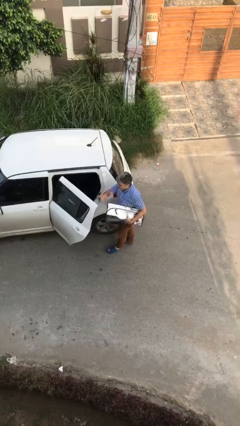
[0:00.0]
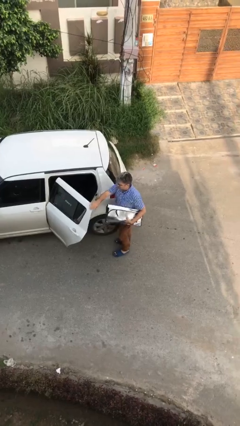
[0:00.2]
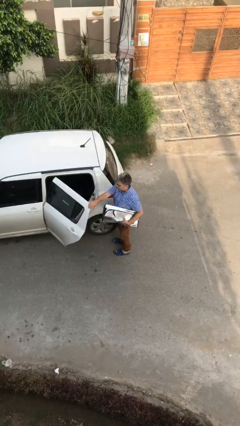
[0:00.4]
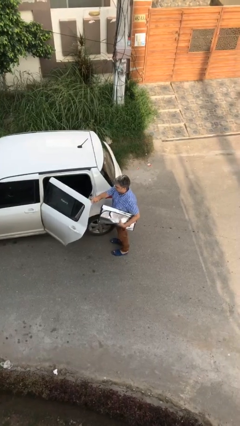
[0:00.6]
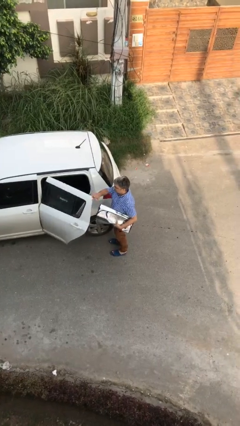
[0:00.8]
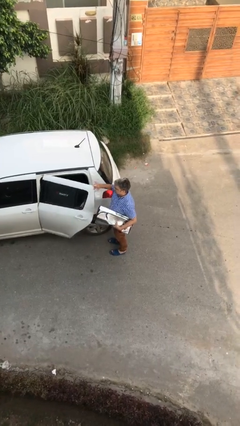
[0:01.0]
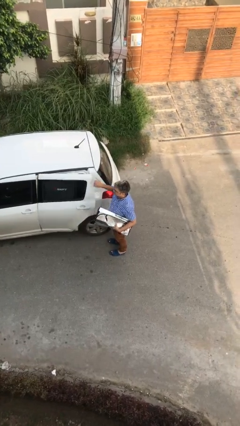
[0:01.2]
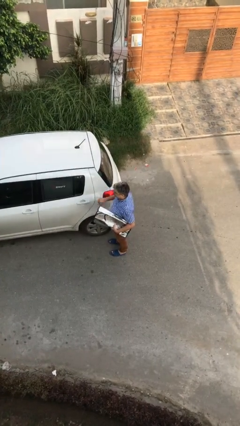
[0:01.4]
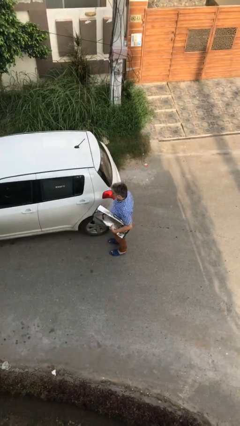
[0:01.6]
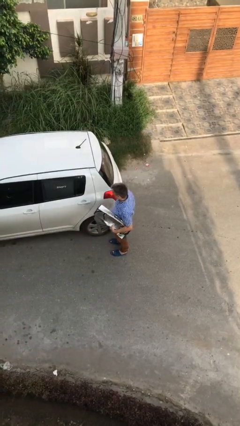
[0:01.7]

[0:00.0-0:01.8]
person closes car door

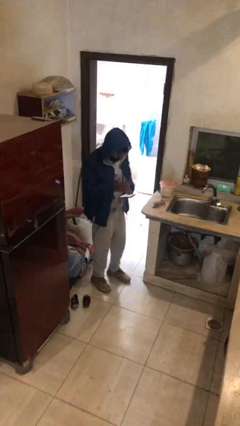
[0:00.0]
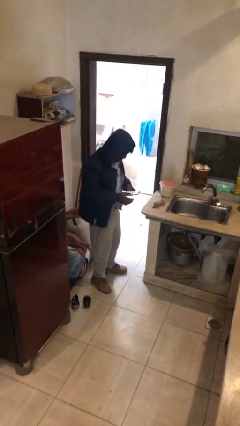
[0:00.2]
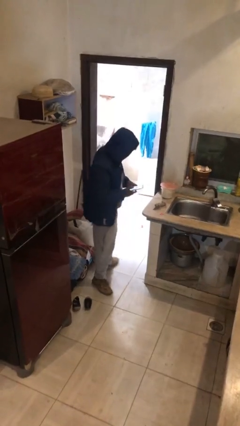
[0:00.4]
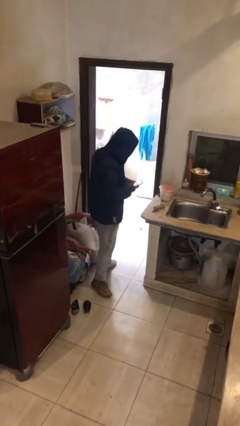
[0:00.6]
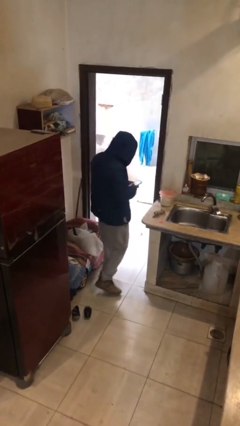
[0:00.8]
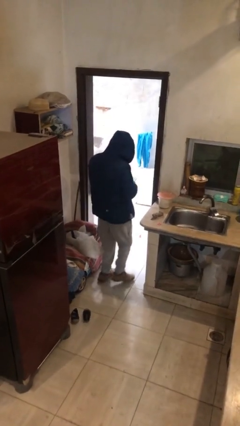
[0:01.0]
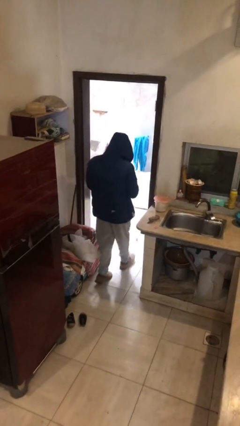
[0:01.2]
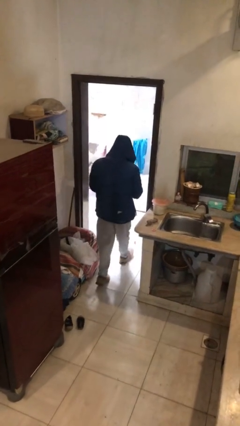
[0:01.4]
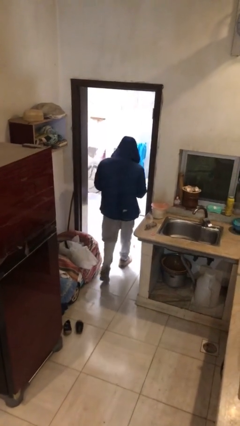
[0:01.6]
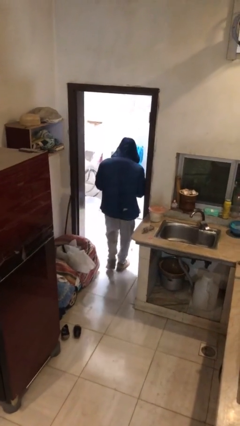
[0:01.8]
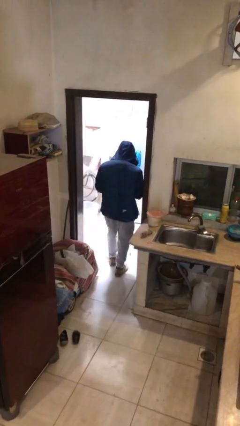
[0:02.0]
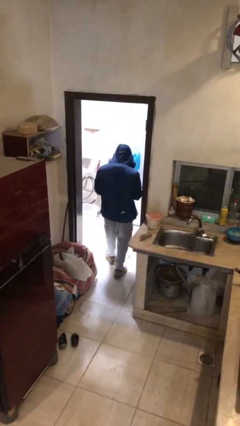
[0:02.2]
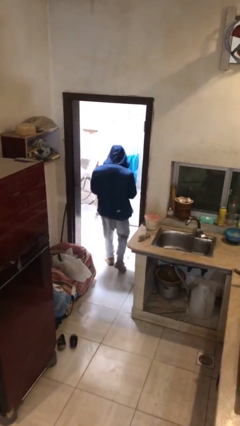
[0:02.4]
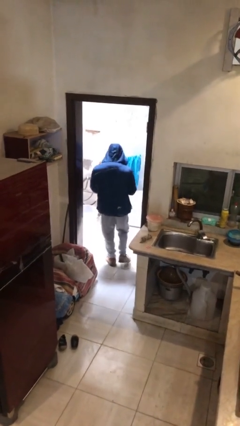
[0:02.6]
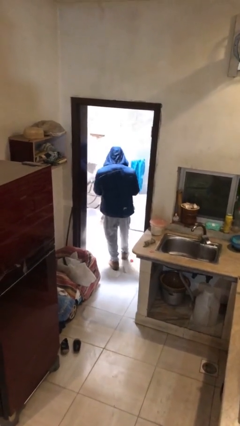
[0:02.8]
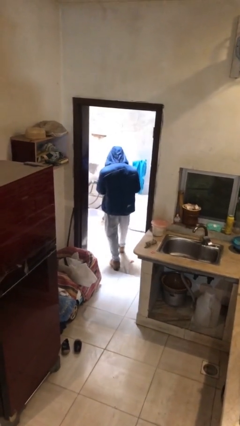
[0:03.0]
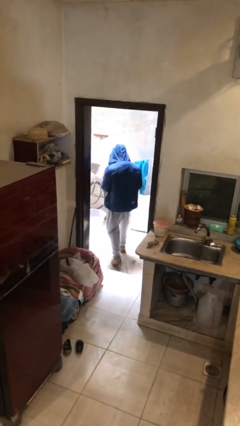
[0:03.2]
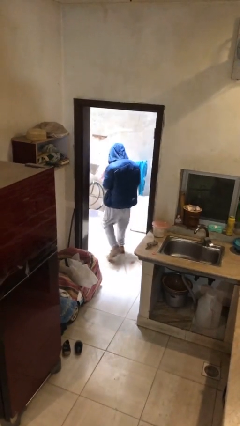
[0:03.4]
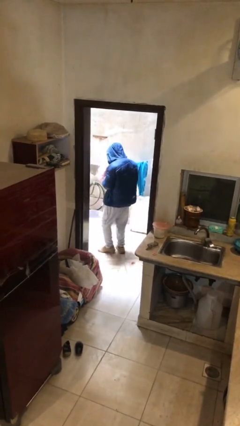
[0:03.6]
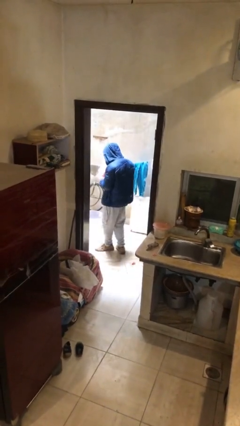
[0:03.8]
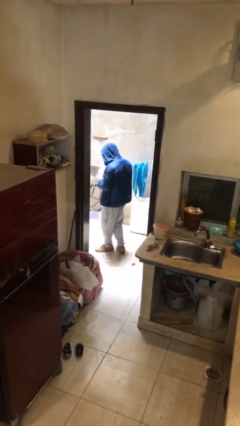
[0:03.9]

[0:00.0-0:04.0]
person exits scene through structure

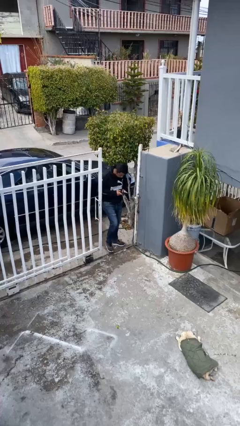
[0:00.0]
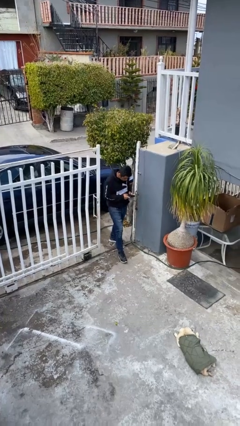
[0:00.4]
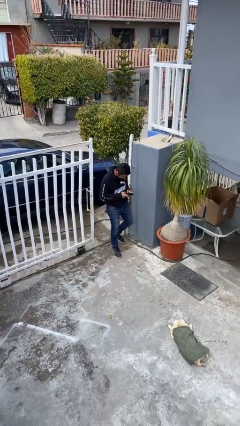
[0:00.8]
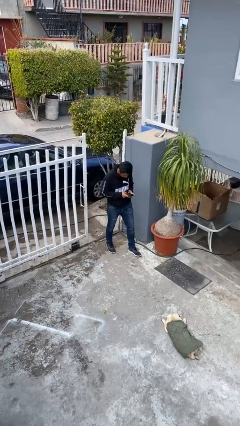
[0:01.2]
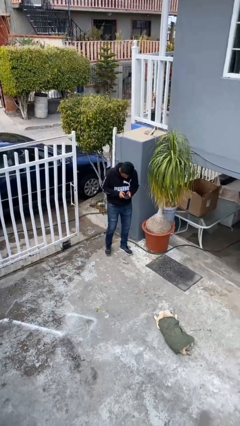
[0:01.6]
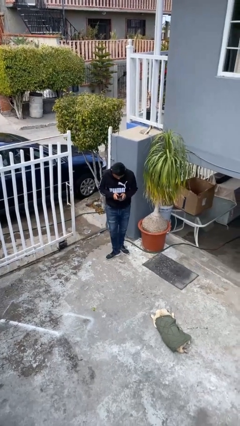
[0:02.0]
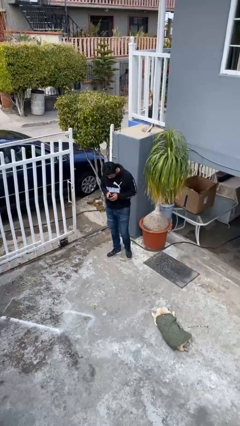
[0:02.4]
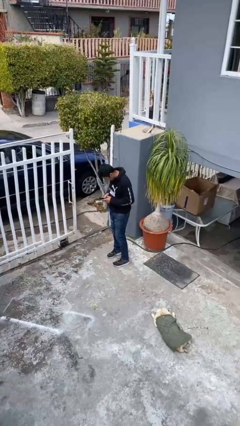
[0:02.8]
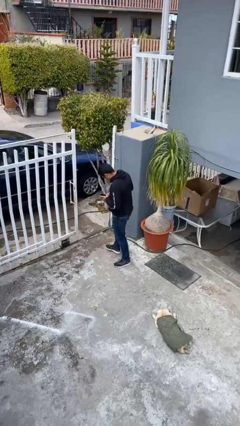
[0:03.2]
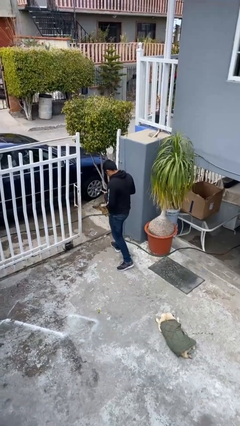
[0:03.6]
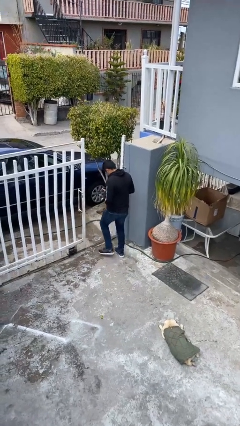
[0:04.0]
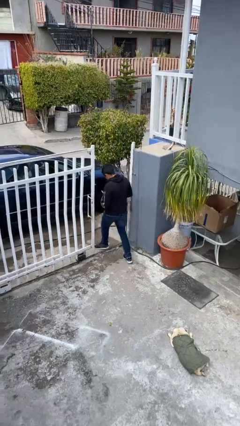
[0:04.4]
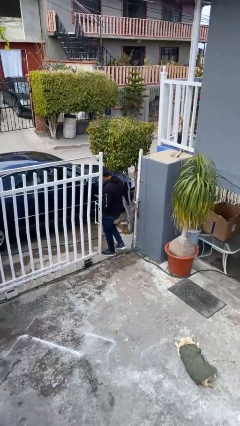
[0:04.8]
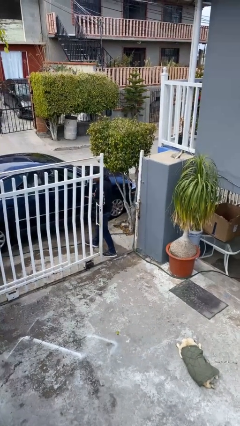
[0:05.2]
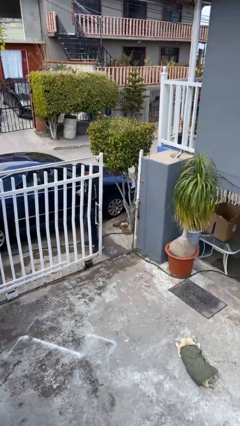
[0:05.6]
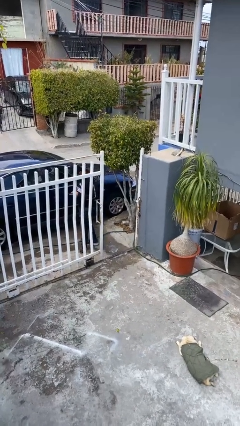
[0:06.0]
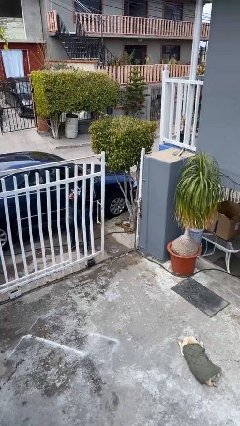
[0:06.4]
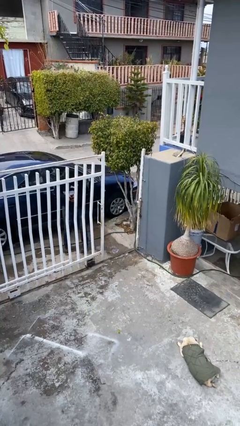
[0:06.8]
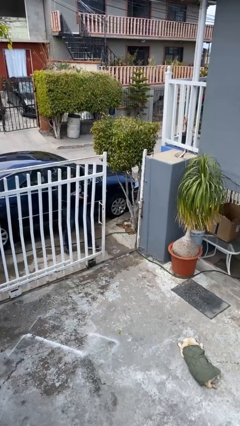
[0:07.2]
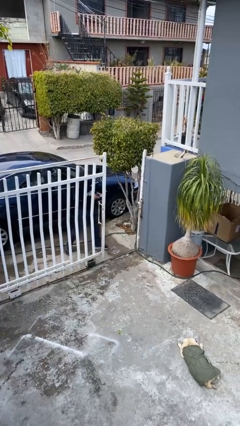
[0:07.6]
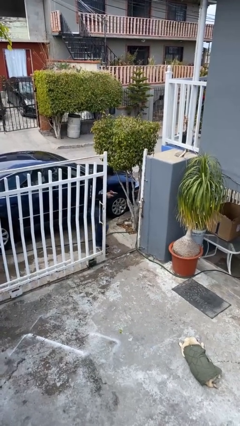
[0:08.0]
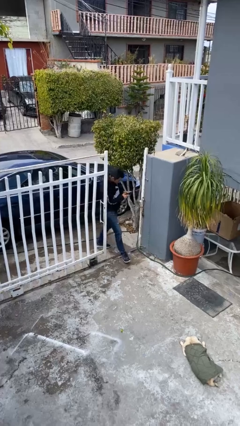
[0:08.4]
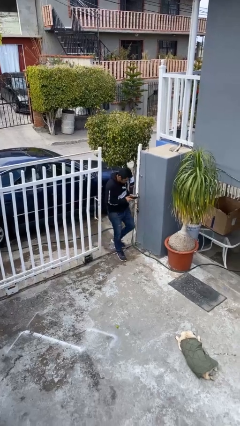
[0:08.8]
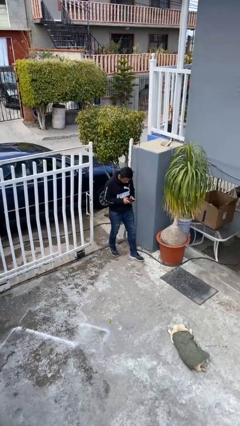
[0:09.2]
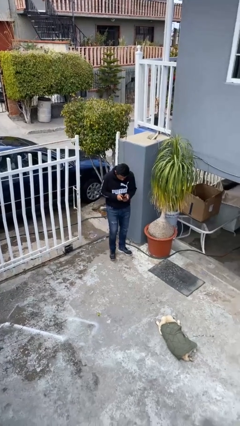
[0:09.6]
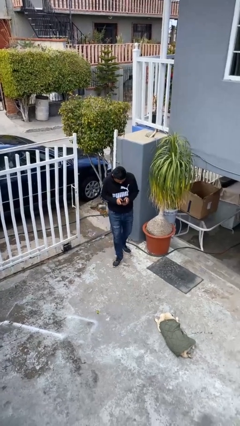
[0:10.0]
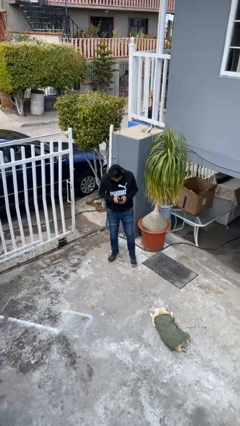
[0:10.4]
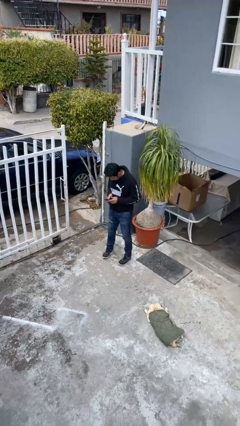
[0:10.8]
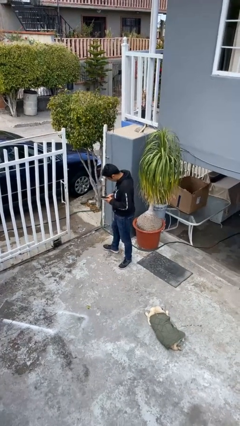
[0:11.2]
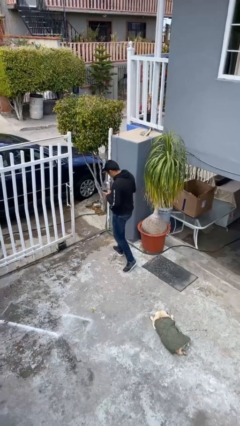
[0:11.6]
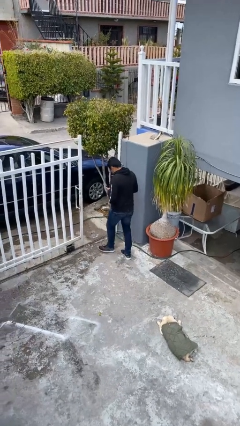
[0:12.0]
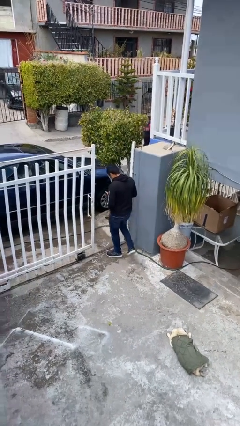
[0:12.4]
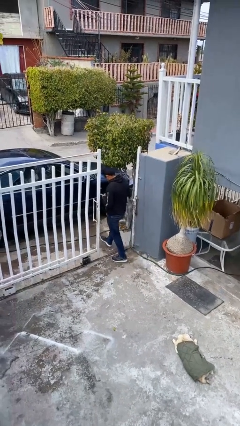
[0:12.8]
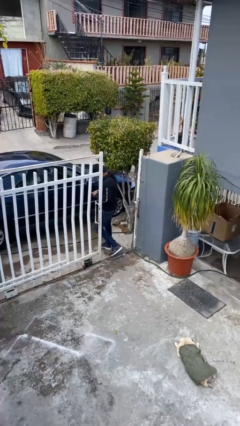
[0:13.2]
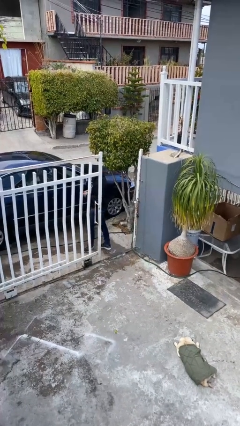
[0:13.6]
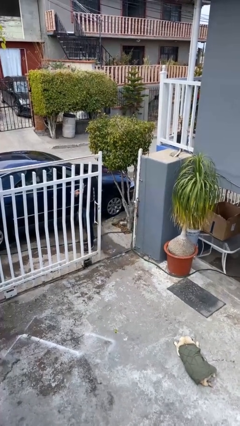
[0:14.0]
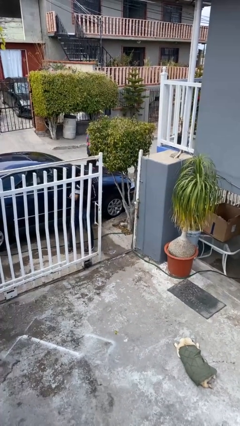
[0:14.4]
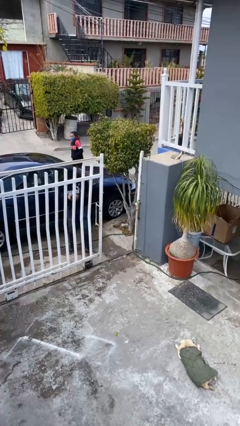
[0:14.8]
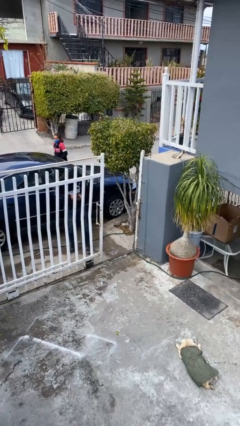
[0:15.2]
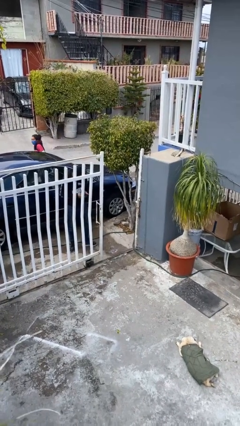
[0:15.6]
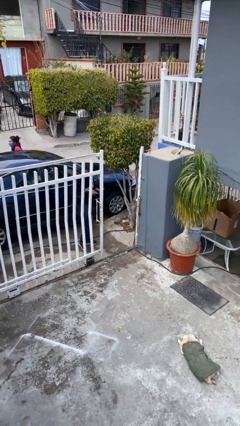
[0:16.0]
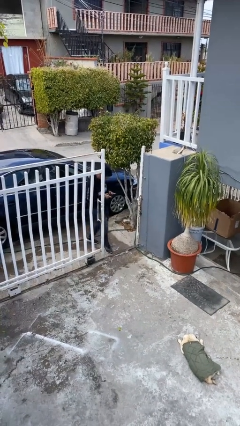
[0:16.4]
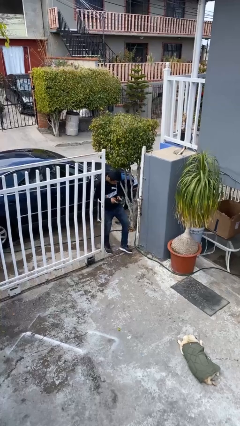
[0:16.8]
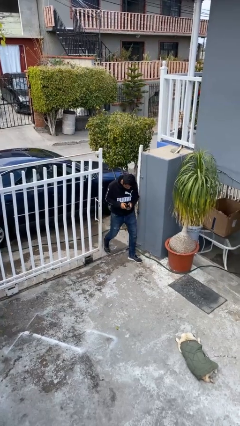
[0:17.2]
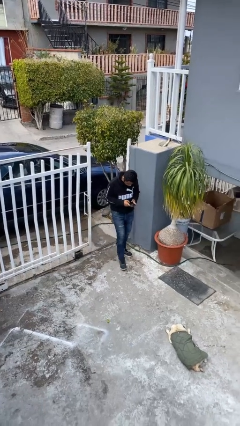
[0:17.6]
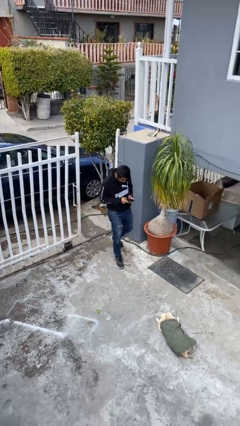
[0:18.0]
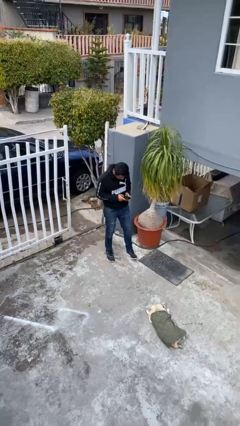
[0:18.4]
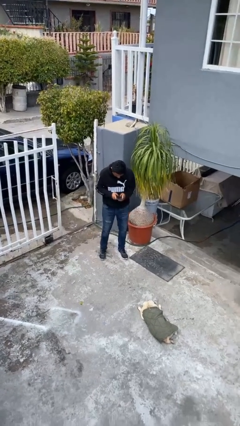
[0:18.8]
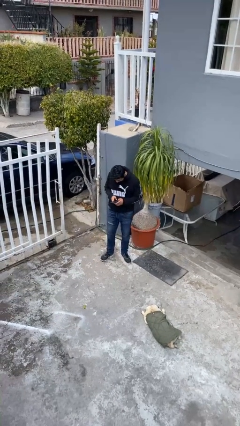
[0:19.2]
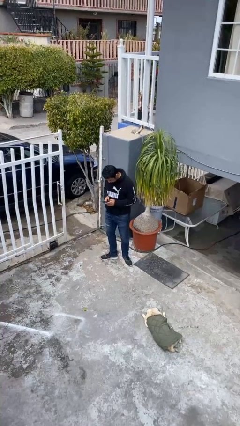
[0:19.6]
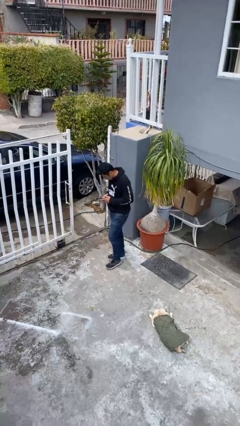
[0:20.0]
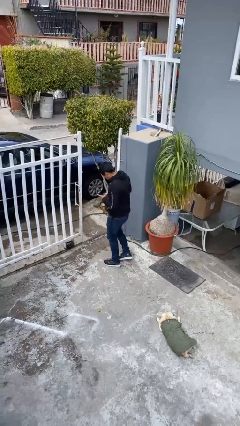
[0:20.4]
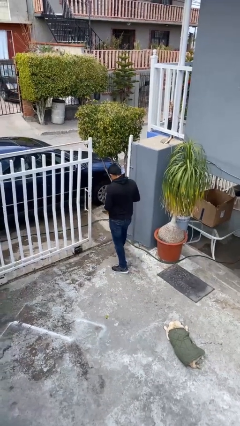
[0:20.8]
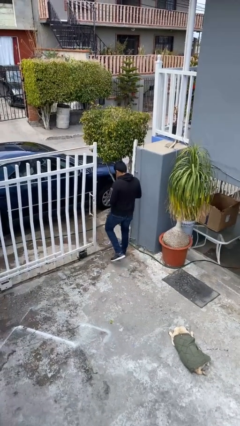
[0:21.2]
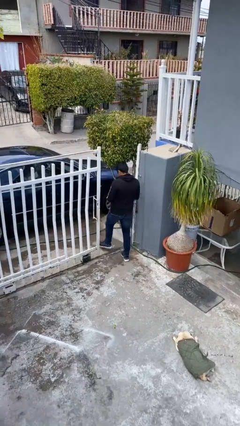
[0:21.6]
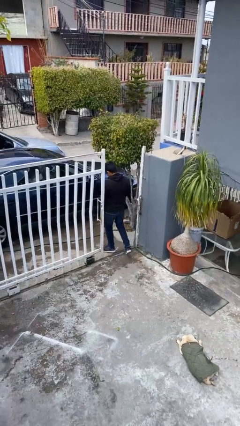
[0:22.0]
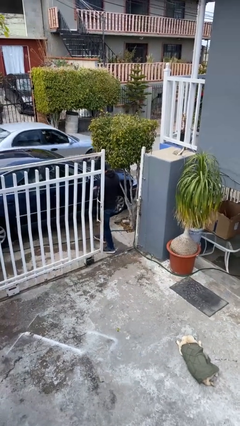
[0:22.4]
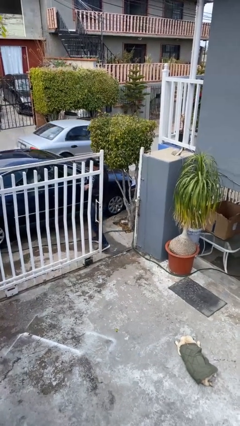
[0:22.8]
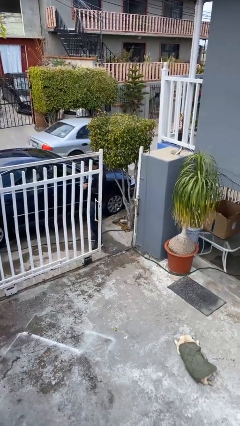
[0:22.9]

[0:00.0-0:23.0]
person texts on phone

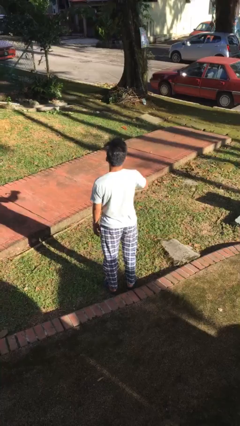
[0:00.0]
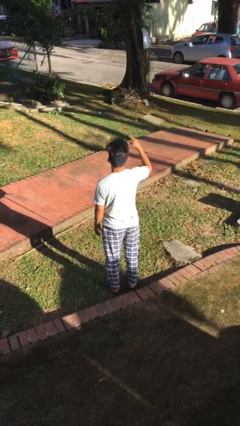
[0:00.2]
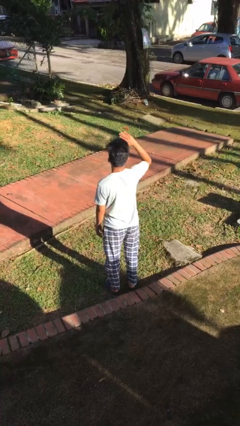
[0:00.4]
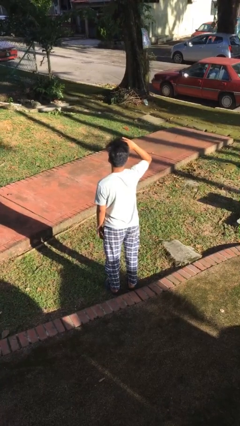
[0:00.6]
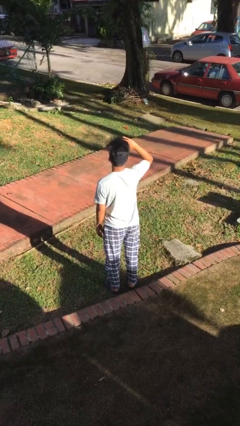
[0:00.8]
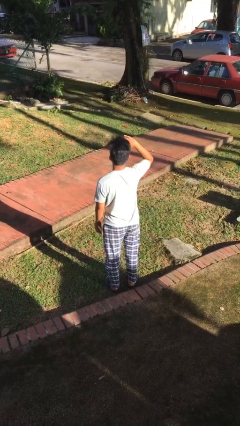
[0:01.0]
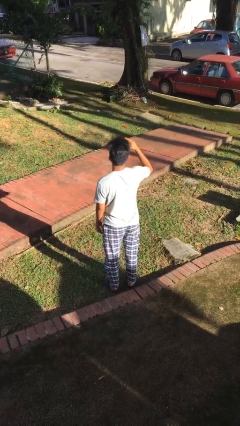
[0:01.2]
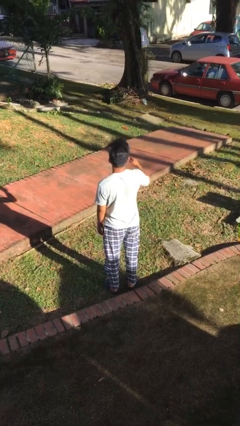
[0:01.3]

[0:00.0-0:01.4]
person salutes
